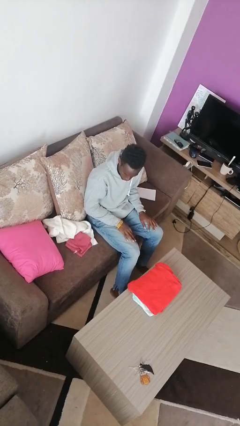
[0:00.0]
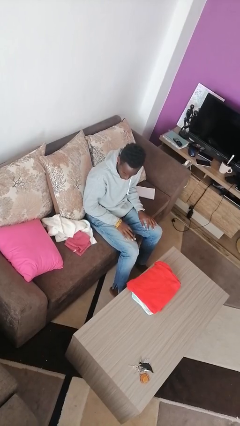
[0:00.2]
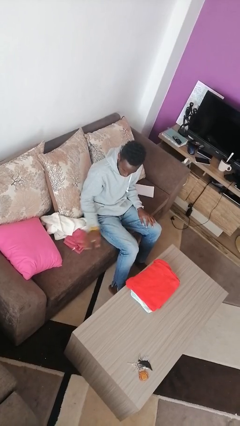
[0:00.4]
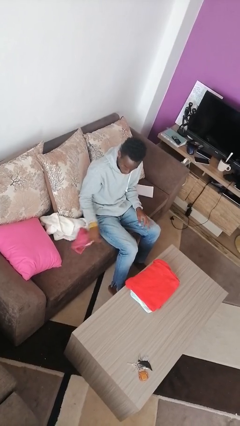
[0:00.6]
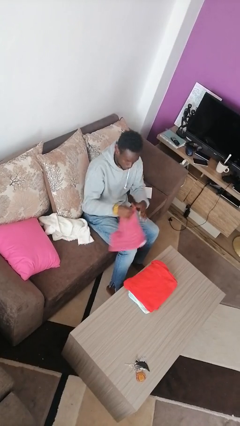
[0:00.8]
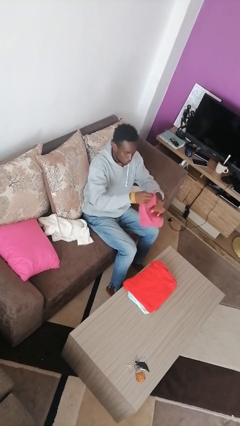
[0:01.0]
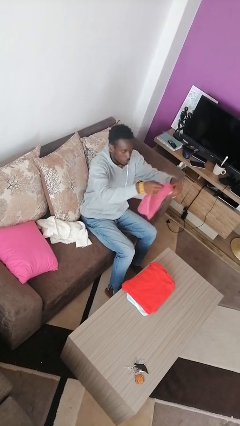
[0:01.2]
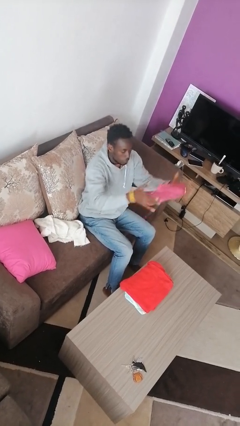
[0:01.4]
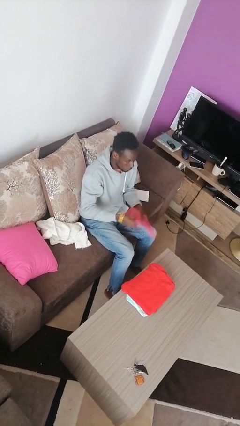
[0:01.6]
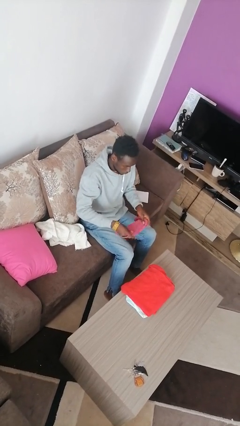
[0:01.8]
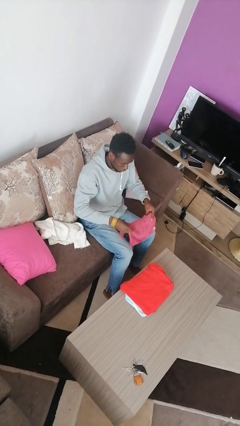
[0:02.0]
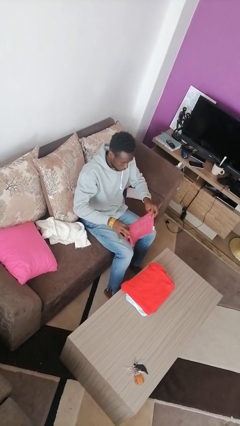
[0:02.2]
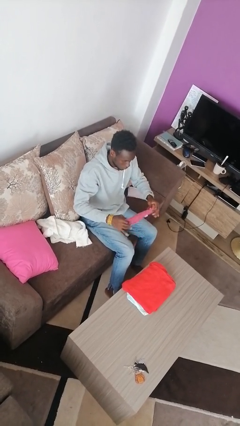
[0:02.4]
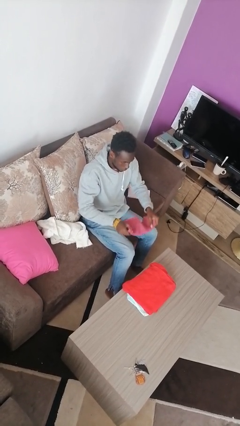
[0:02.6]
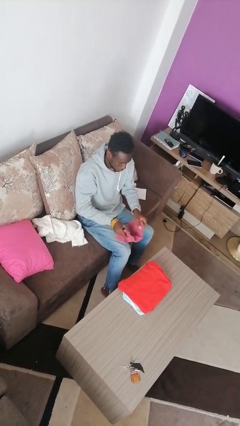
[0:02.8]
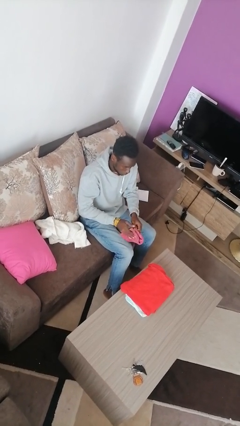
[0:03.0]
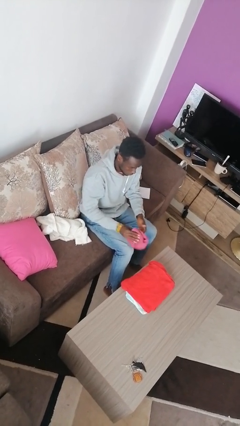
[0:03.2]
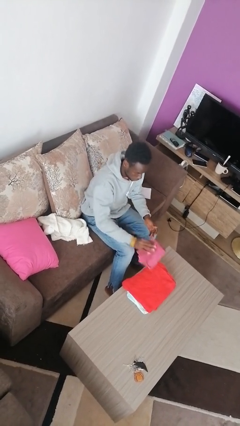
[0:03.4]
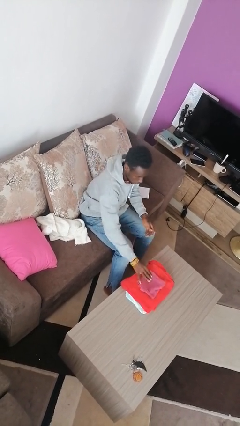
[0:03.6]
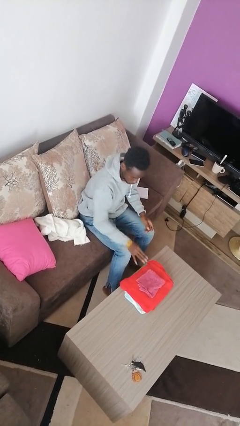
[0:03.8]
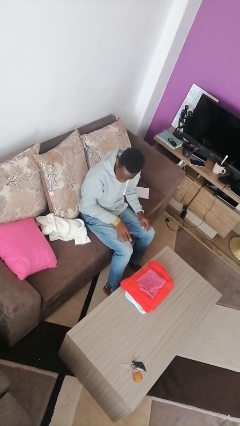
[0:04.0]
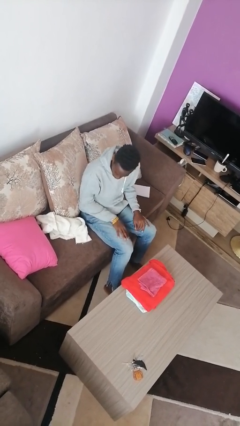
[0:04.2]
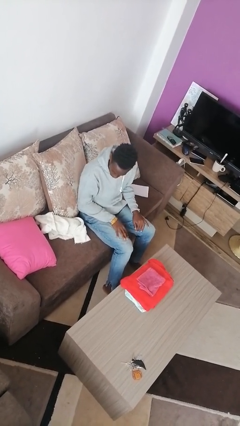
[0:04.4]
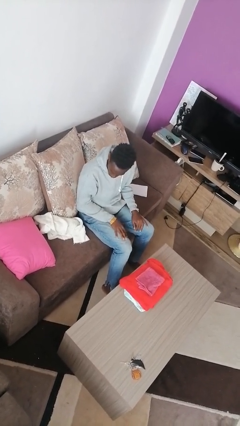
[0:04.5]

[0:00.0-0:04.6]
person folds towel

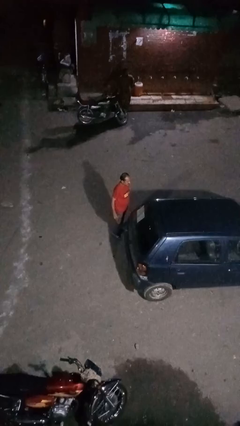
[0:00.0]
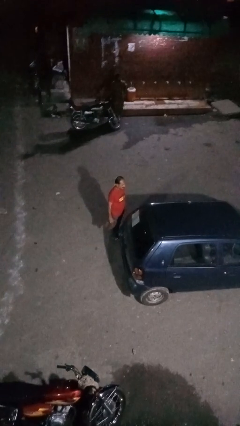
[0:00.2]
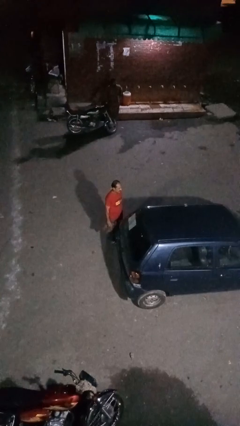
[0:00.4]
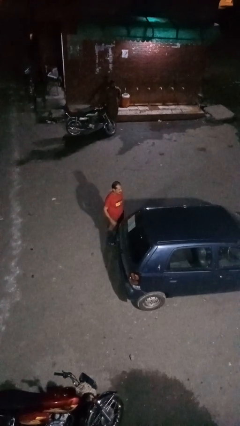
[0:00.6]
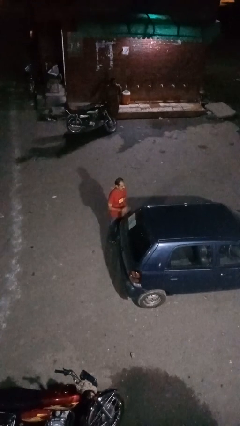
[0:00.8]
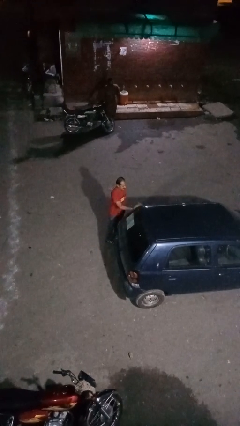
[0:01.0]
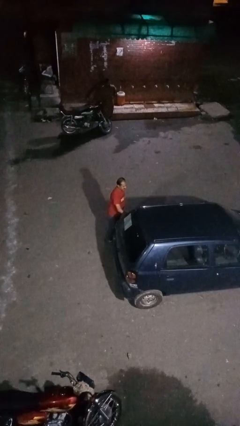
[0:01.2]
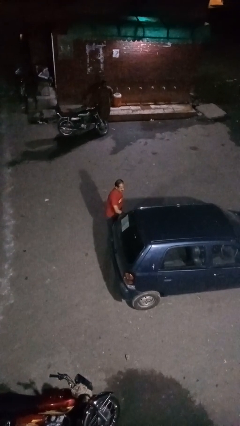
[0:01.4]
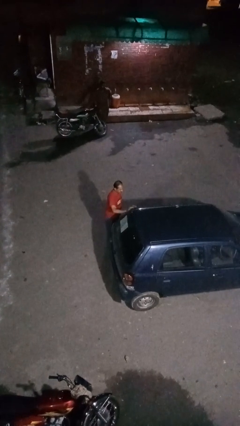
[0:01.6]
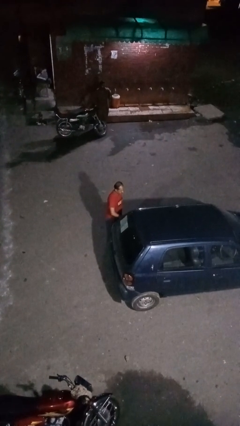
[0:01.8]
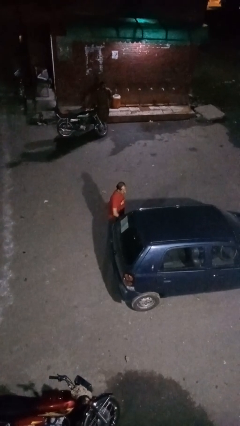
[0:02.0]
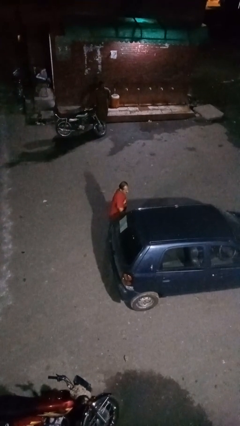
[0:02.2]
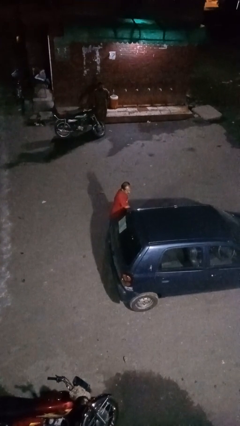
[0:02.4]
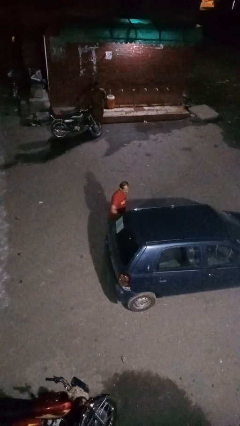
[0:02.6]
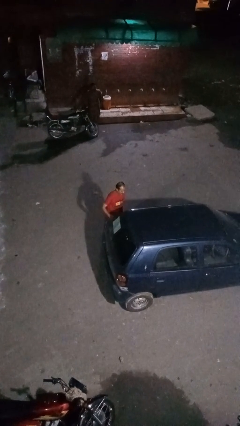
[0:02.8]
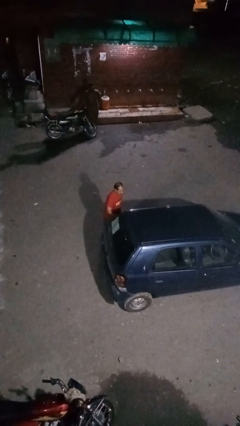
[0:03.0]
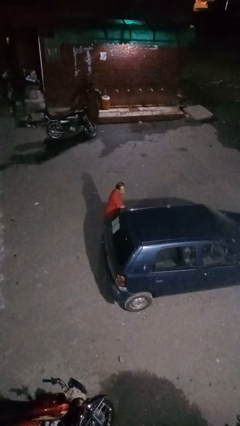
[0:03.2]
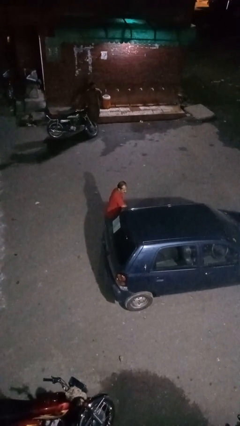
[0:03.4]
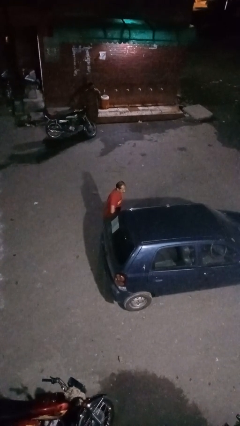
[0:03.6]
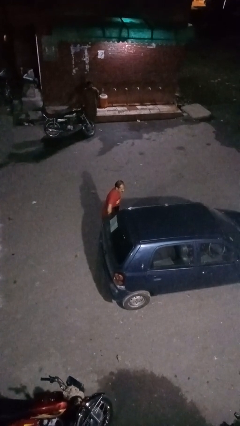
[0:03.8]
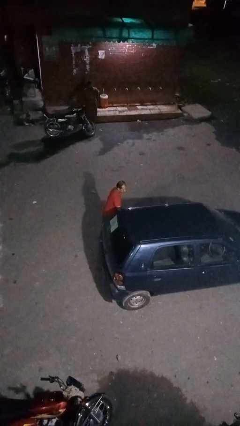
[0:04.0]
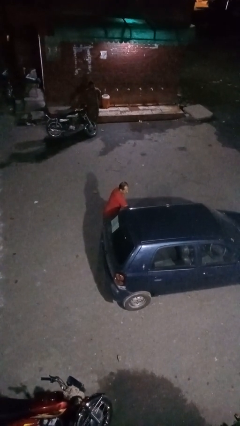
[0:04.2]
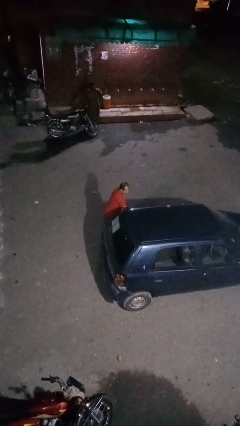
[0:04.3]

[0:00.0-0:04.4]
person polishes car with rag

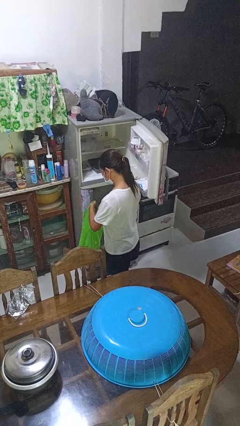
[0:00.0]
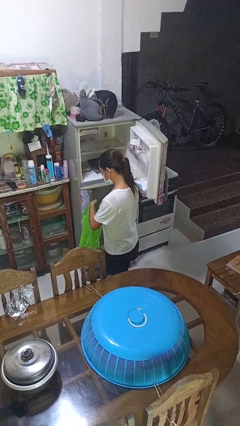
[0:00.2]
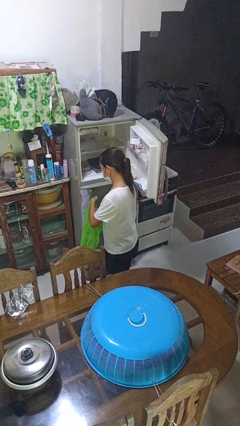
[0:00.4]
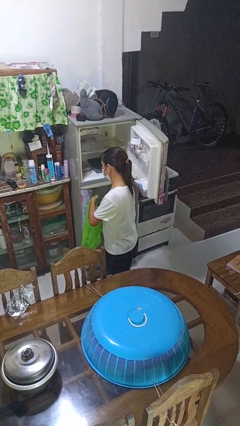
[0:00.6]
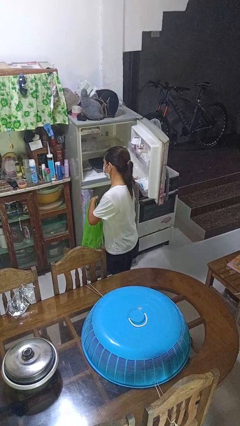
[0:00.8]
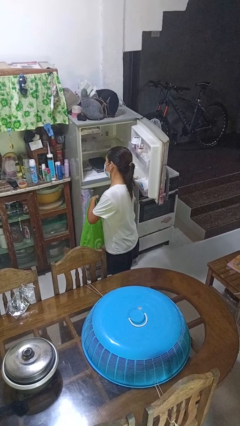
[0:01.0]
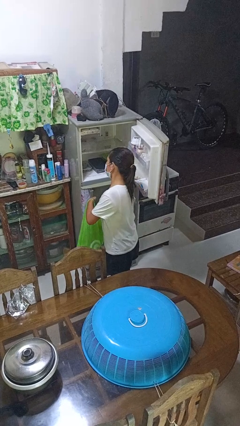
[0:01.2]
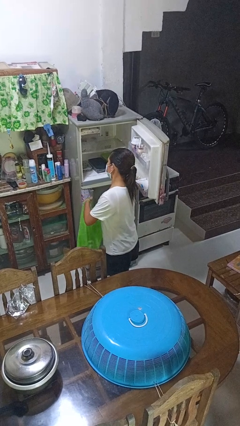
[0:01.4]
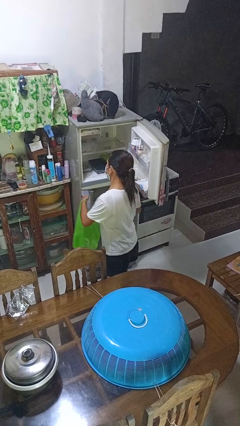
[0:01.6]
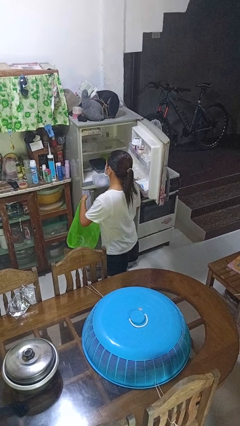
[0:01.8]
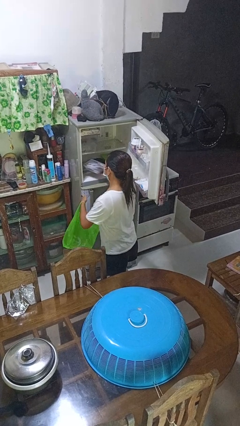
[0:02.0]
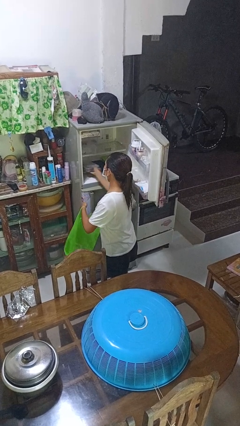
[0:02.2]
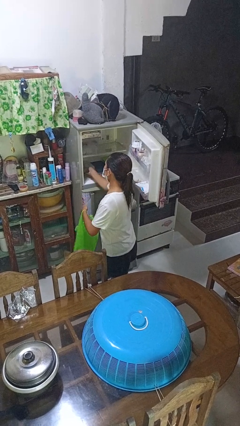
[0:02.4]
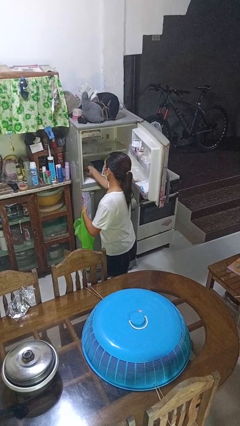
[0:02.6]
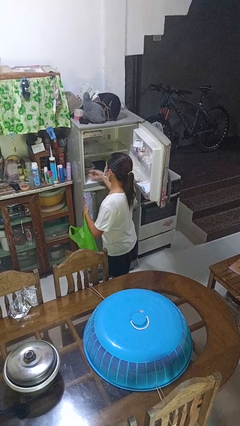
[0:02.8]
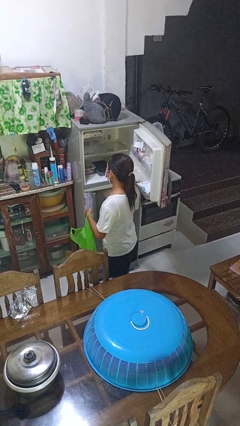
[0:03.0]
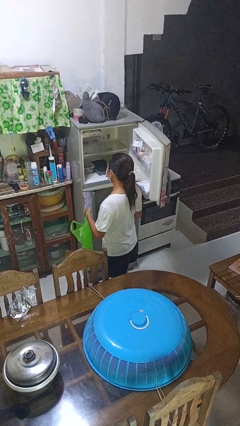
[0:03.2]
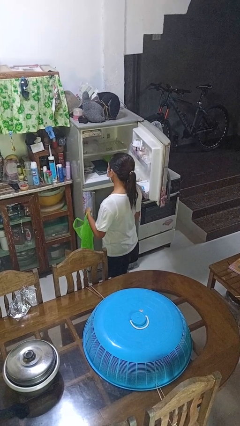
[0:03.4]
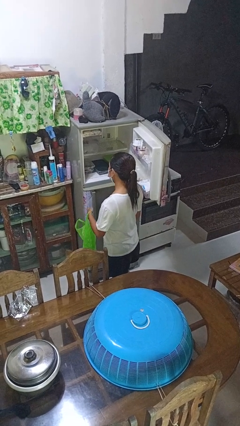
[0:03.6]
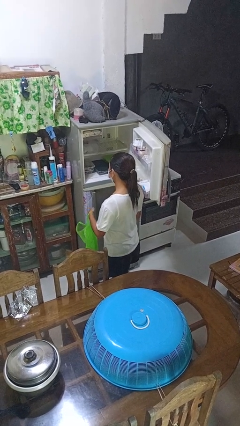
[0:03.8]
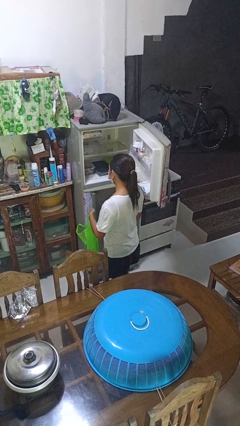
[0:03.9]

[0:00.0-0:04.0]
person loads groceries into refrigerator

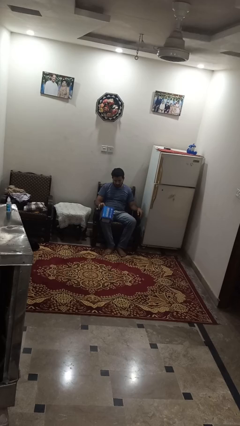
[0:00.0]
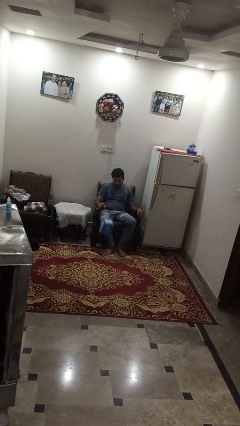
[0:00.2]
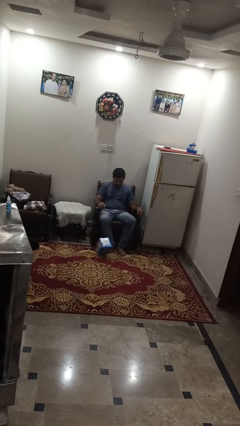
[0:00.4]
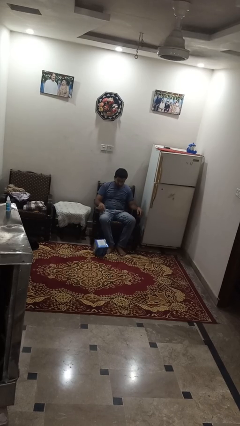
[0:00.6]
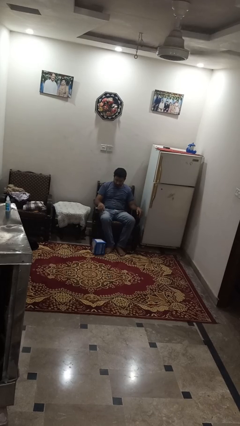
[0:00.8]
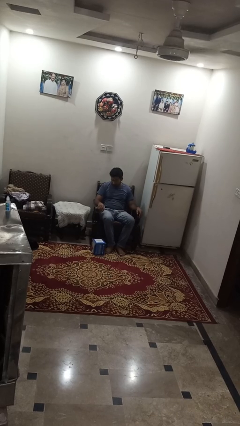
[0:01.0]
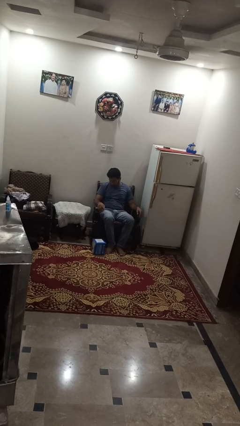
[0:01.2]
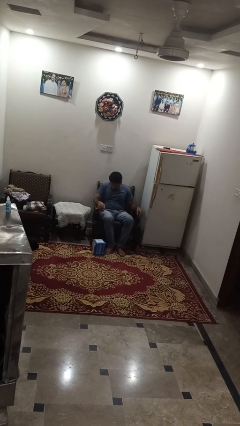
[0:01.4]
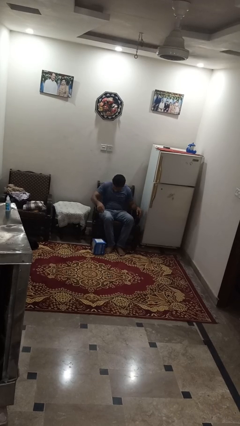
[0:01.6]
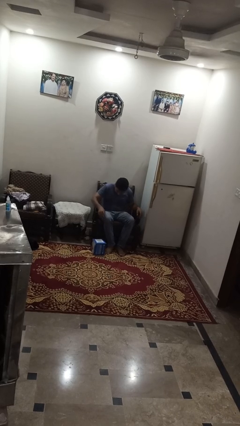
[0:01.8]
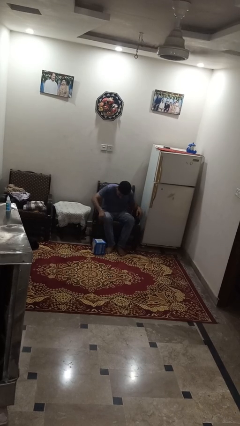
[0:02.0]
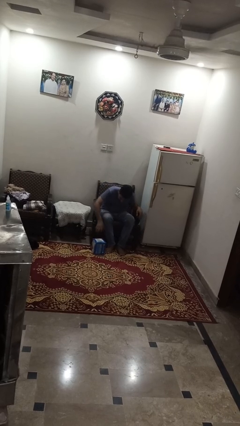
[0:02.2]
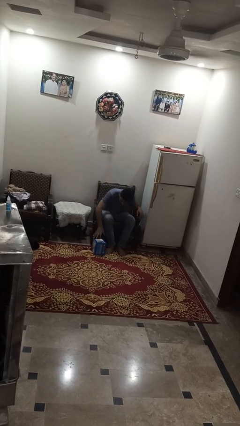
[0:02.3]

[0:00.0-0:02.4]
person drops object

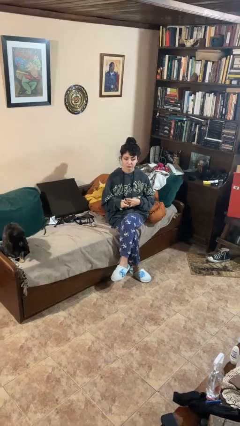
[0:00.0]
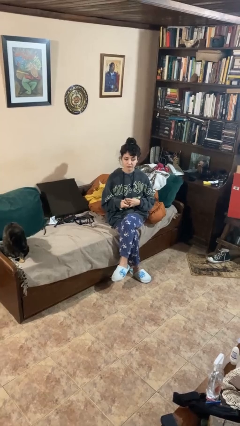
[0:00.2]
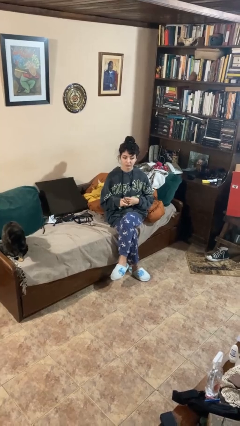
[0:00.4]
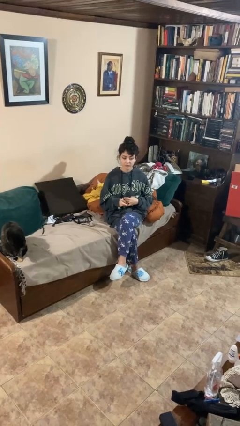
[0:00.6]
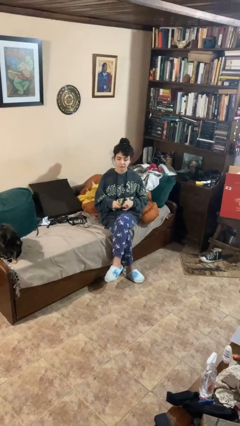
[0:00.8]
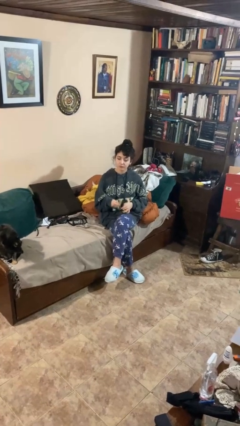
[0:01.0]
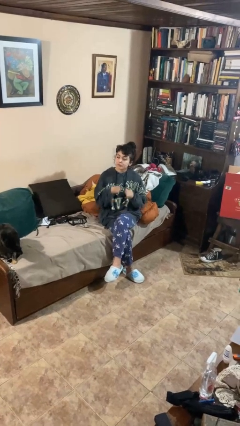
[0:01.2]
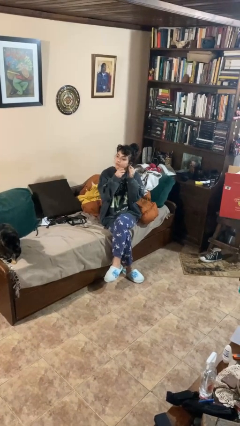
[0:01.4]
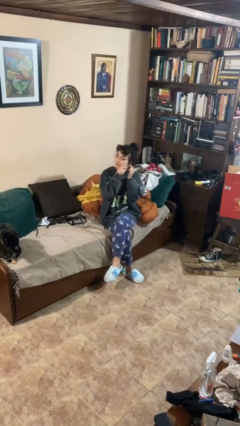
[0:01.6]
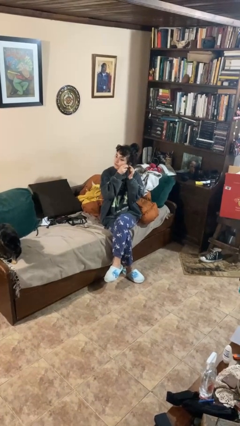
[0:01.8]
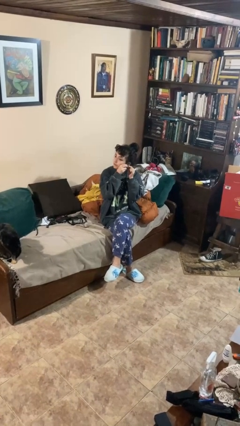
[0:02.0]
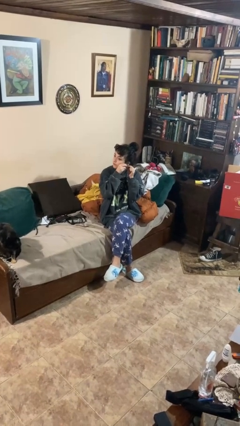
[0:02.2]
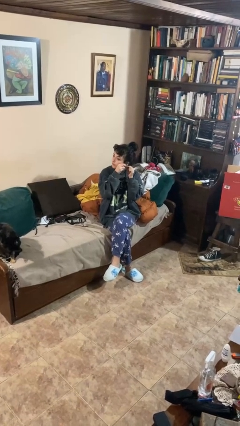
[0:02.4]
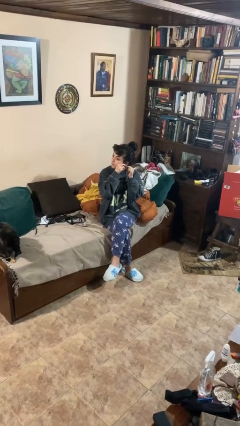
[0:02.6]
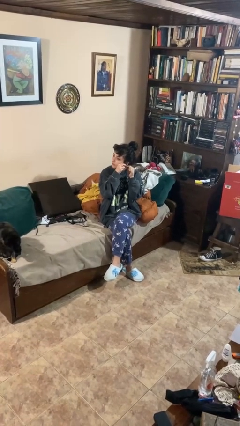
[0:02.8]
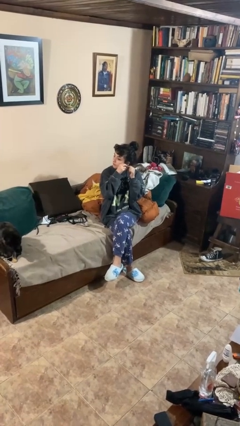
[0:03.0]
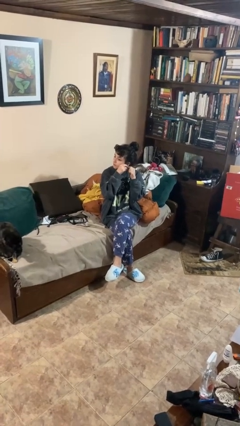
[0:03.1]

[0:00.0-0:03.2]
person puts on earrings
